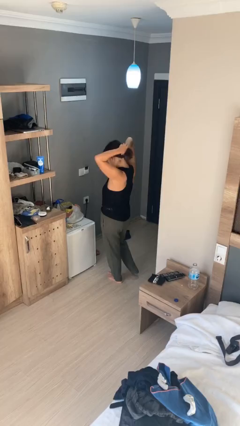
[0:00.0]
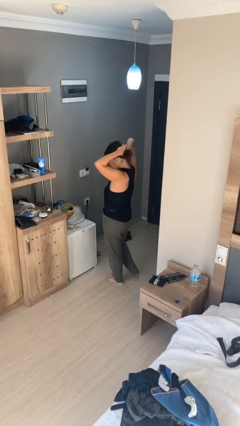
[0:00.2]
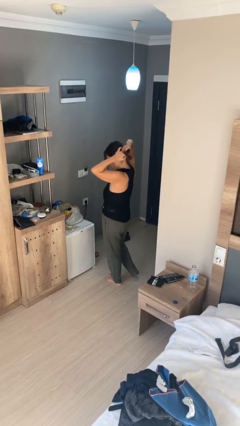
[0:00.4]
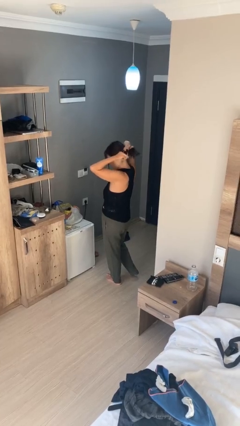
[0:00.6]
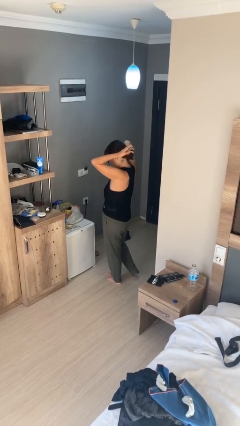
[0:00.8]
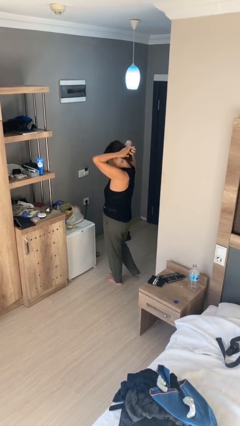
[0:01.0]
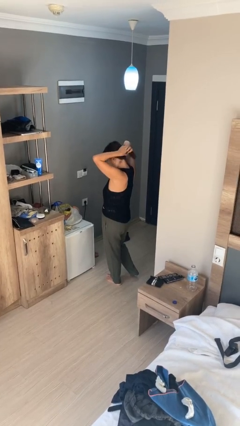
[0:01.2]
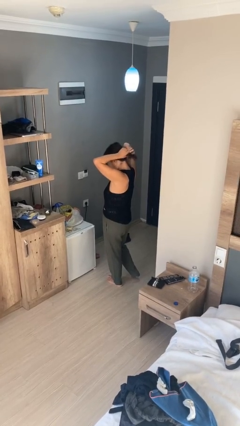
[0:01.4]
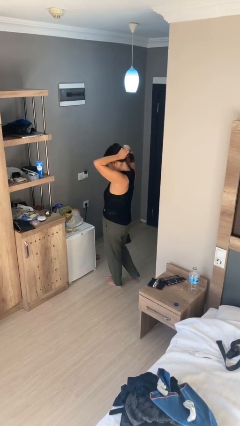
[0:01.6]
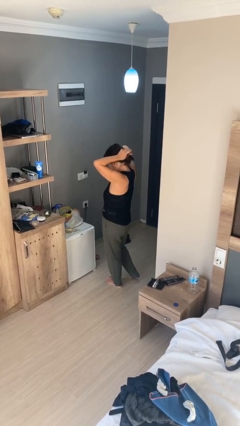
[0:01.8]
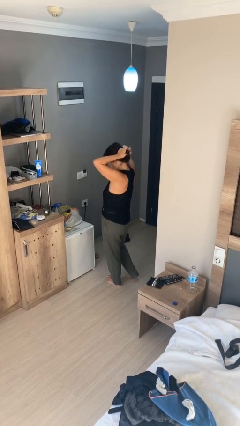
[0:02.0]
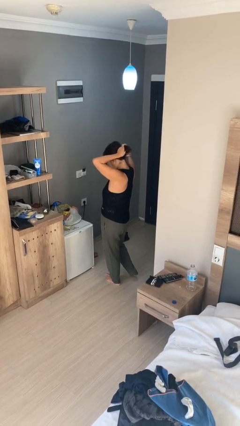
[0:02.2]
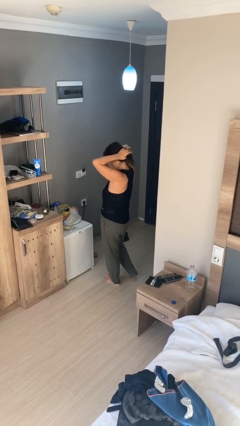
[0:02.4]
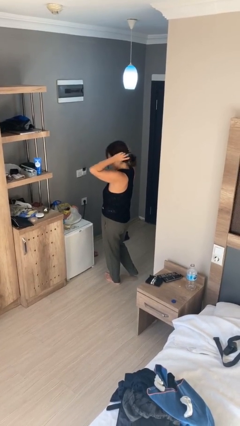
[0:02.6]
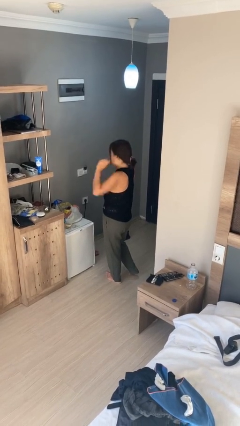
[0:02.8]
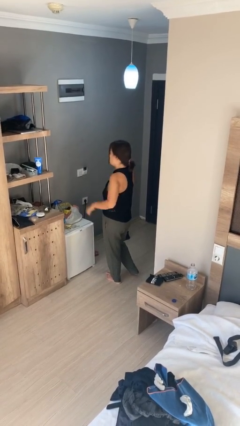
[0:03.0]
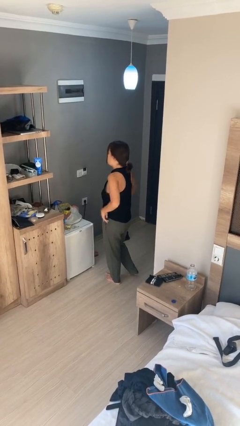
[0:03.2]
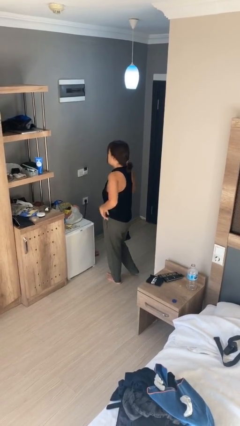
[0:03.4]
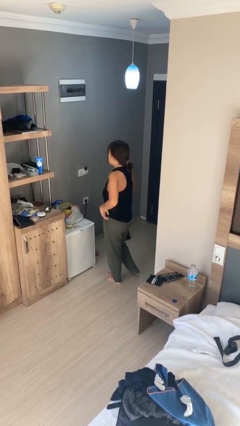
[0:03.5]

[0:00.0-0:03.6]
person puts hair in ponytail

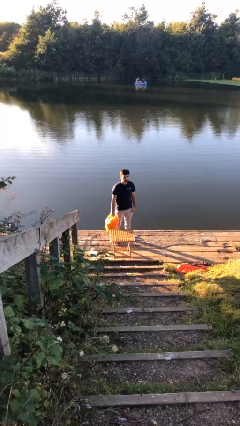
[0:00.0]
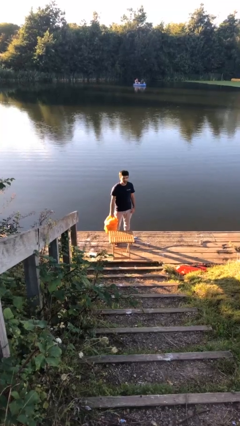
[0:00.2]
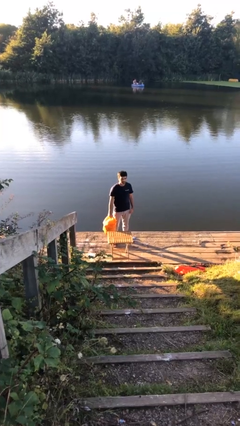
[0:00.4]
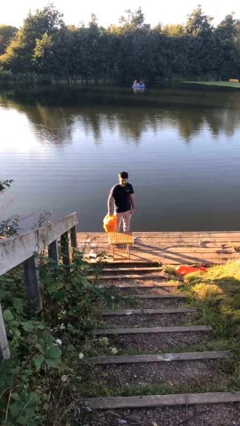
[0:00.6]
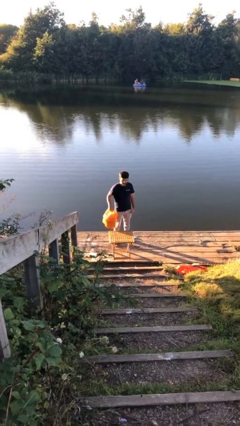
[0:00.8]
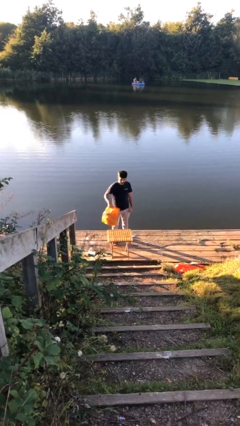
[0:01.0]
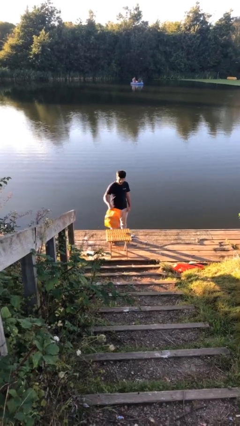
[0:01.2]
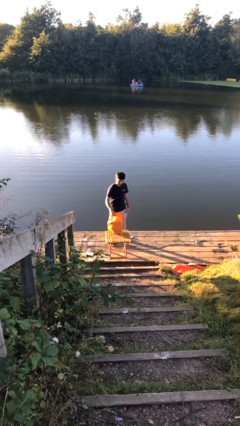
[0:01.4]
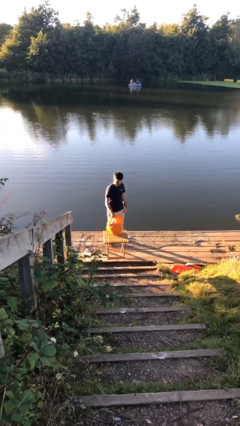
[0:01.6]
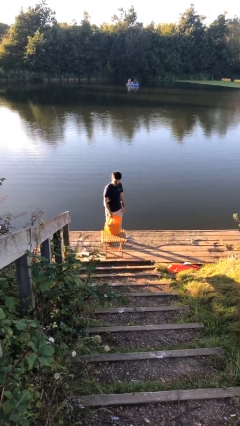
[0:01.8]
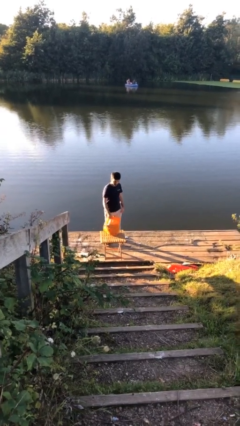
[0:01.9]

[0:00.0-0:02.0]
person puts down object on table

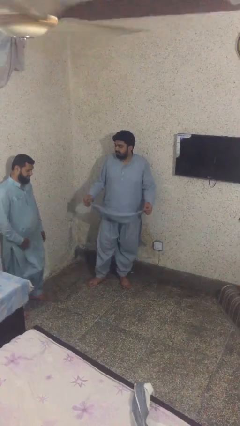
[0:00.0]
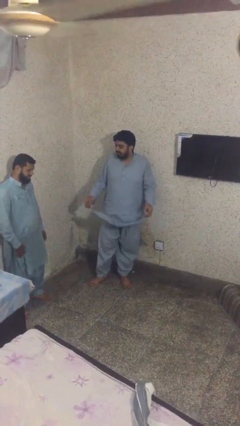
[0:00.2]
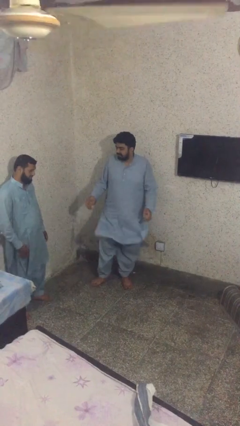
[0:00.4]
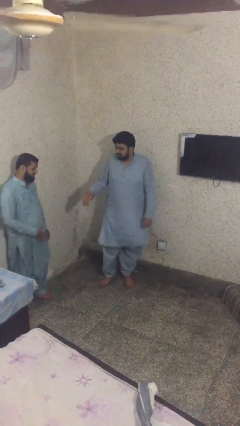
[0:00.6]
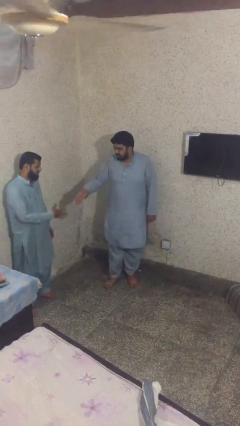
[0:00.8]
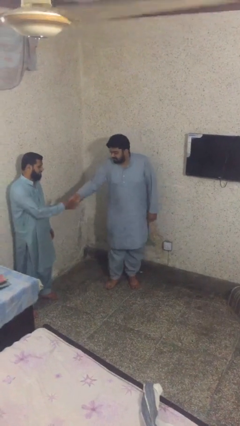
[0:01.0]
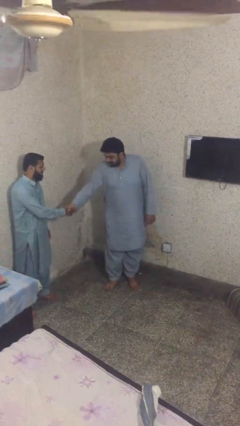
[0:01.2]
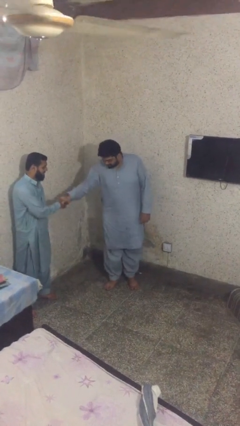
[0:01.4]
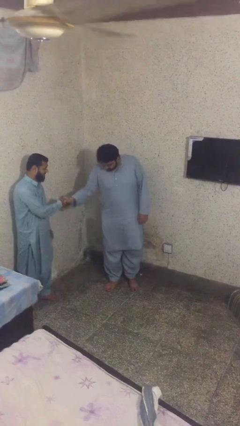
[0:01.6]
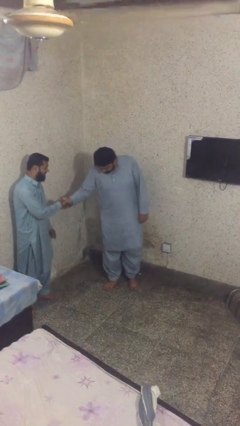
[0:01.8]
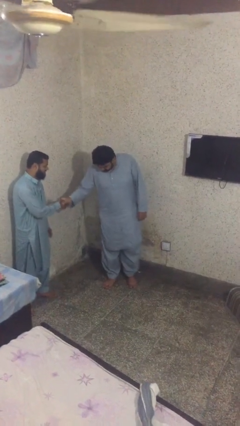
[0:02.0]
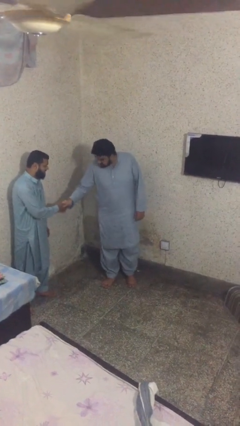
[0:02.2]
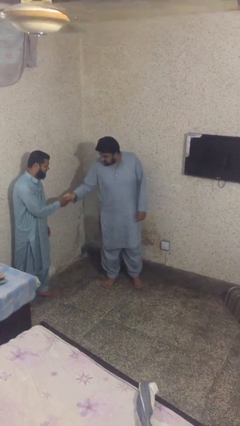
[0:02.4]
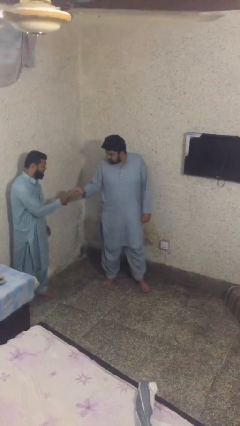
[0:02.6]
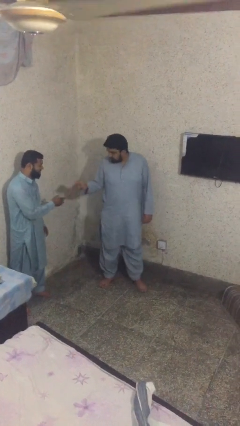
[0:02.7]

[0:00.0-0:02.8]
person shakes hand

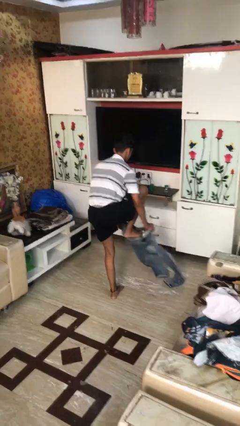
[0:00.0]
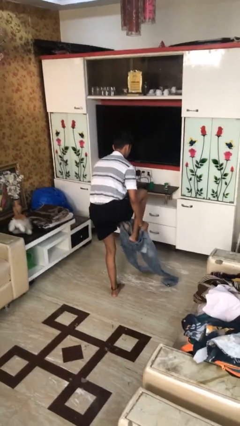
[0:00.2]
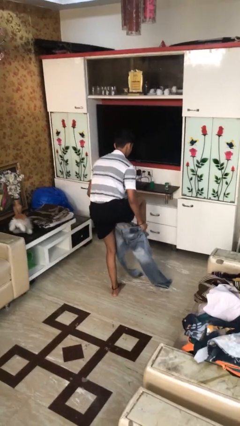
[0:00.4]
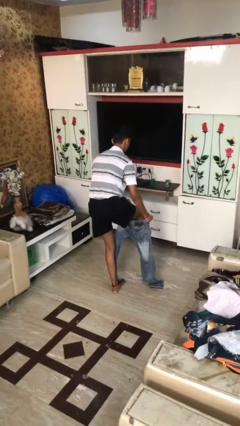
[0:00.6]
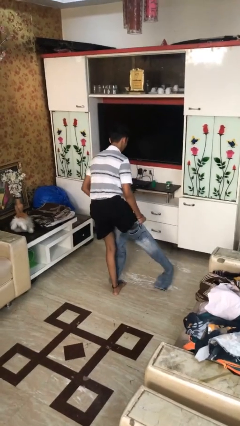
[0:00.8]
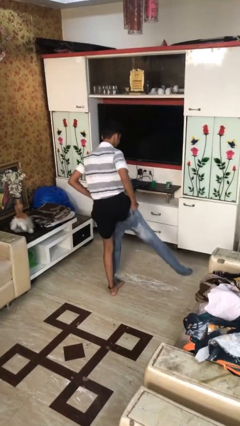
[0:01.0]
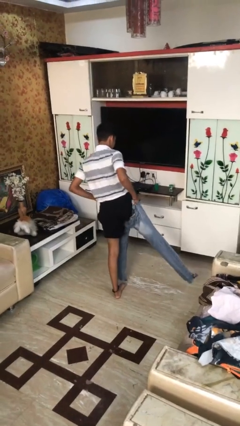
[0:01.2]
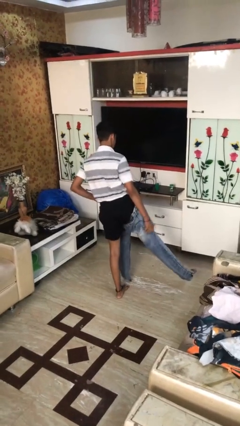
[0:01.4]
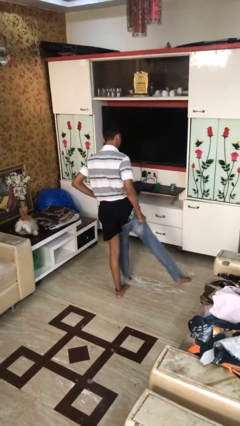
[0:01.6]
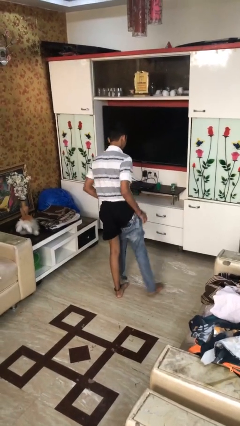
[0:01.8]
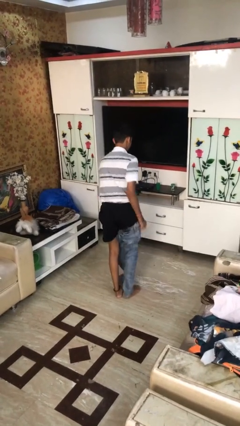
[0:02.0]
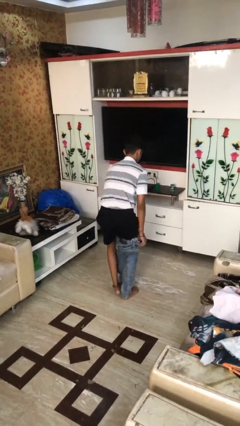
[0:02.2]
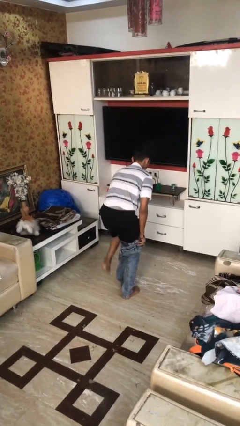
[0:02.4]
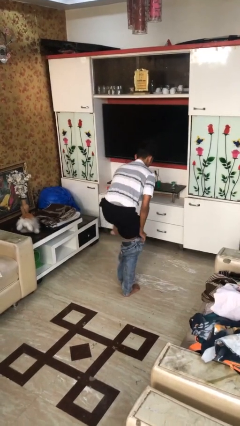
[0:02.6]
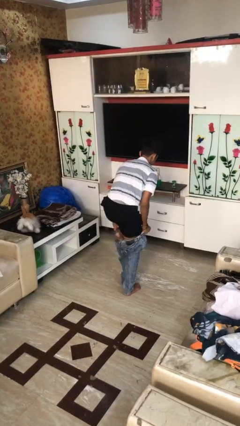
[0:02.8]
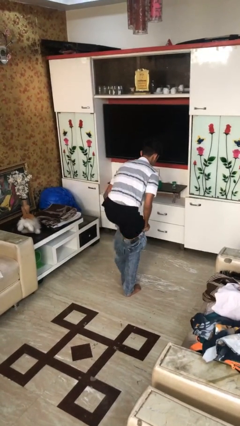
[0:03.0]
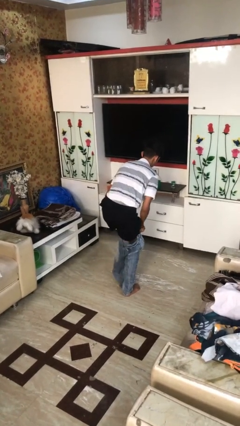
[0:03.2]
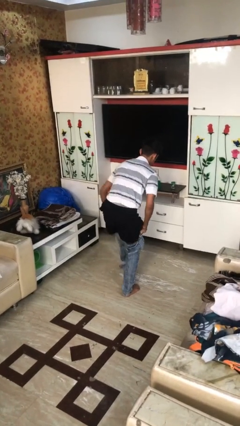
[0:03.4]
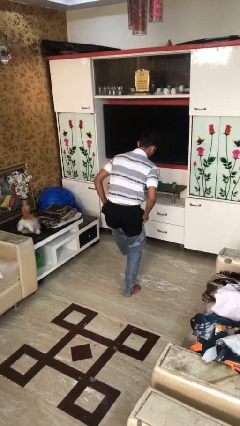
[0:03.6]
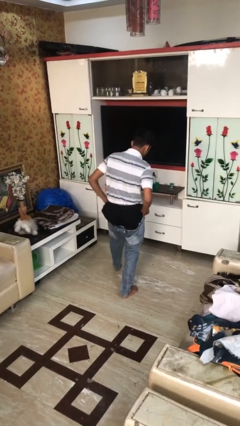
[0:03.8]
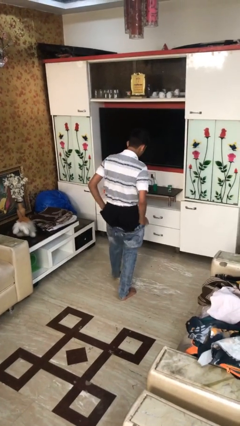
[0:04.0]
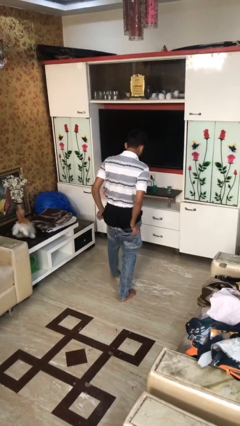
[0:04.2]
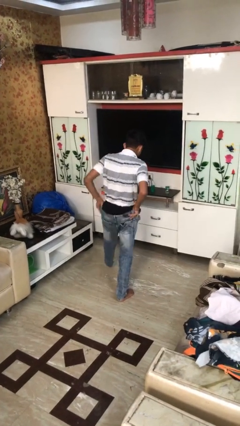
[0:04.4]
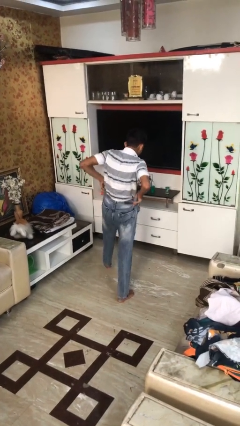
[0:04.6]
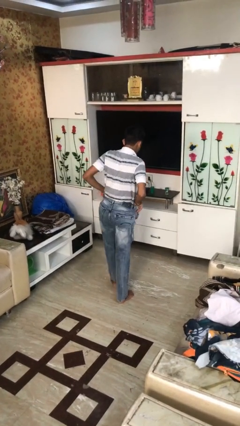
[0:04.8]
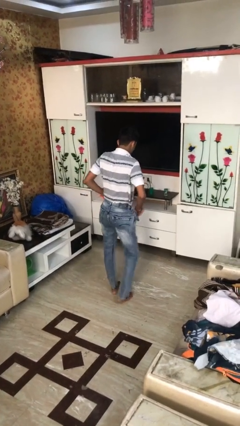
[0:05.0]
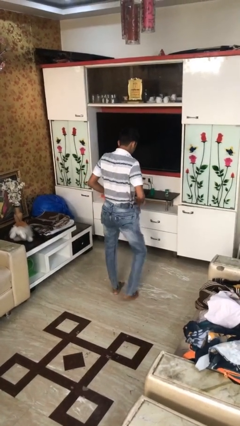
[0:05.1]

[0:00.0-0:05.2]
person puts on pants

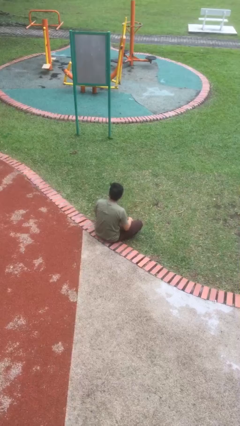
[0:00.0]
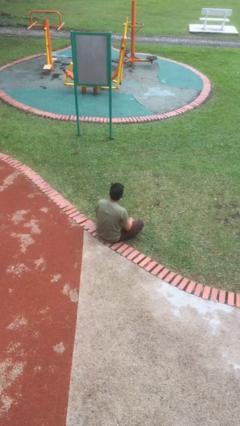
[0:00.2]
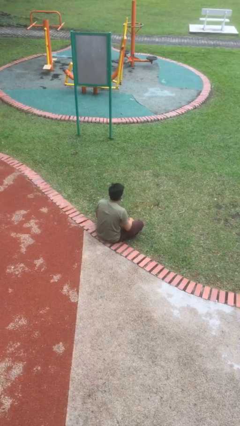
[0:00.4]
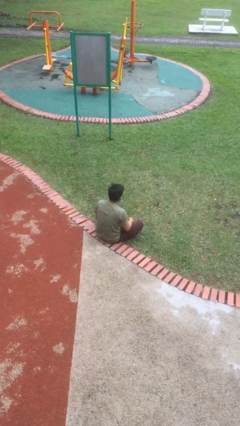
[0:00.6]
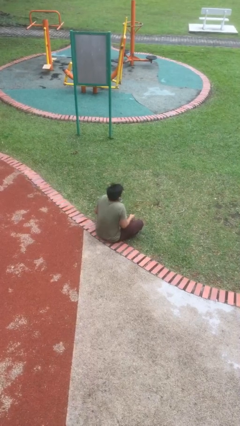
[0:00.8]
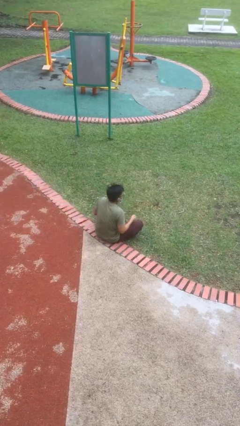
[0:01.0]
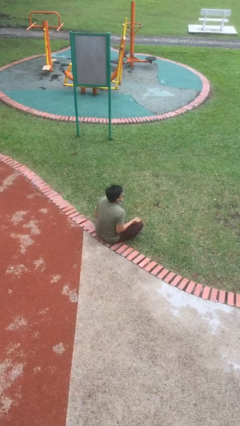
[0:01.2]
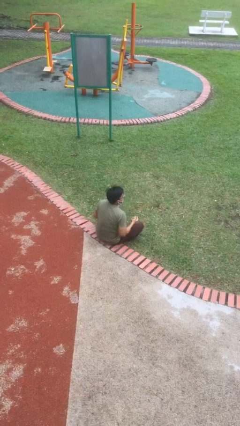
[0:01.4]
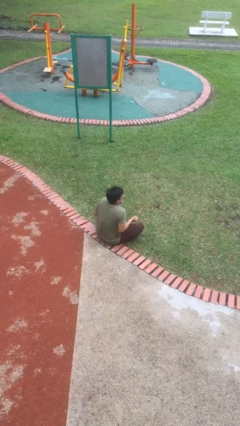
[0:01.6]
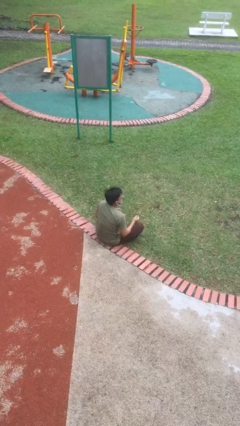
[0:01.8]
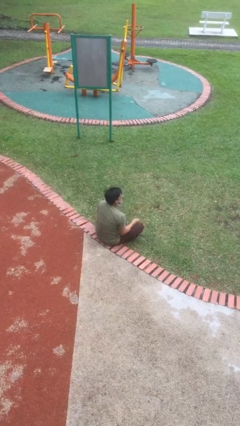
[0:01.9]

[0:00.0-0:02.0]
person shrugs

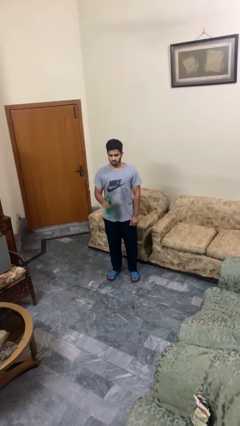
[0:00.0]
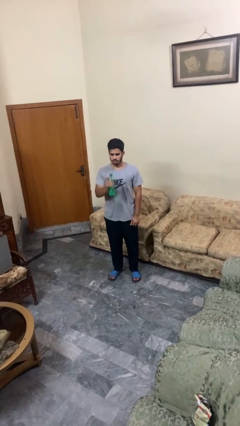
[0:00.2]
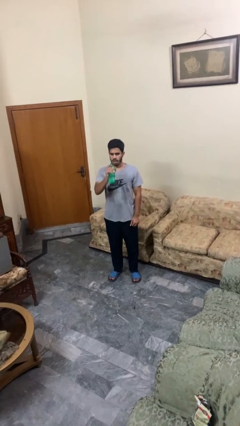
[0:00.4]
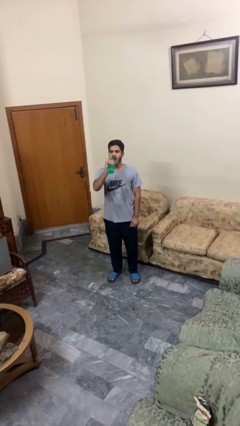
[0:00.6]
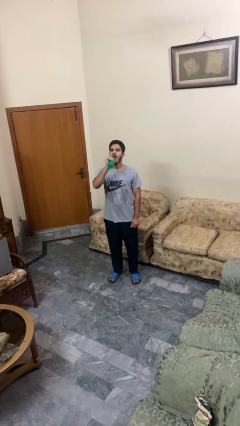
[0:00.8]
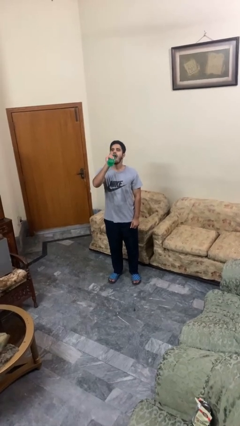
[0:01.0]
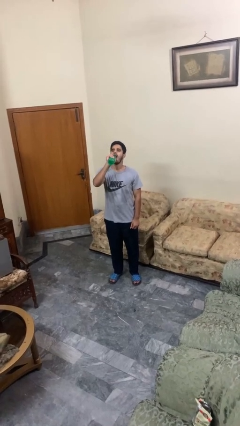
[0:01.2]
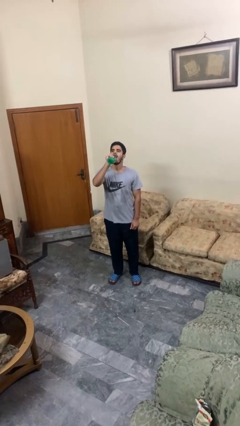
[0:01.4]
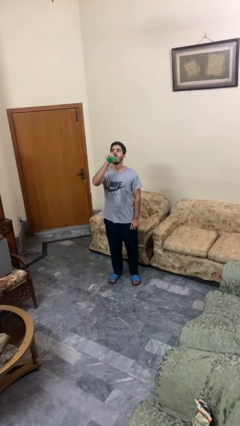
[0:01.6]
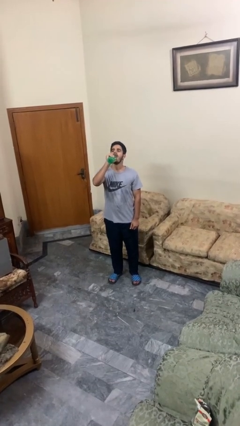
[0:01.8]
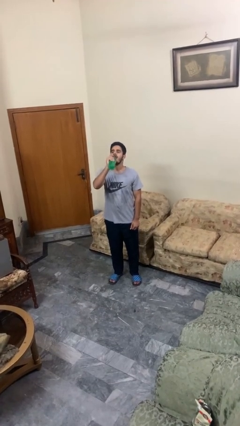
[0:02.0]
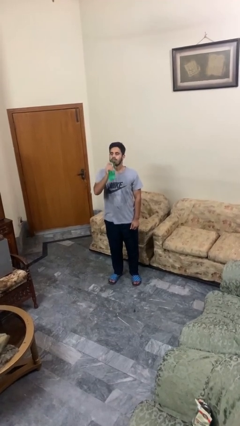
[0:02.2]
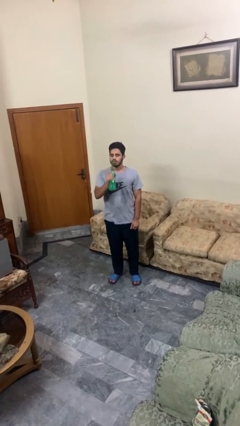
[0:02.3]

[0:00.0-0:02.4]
person drinks from bottle
